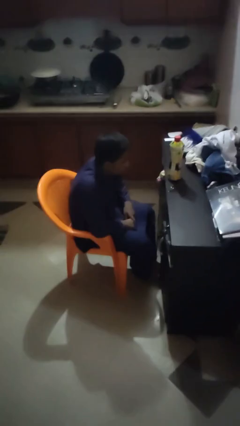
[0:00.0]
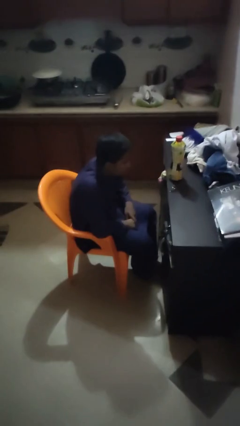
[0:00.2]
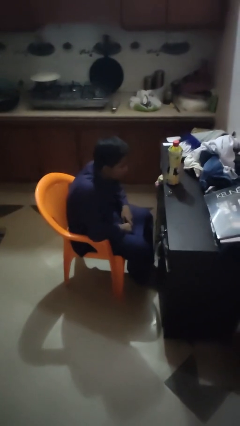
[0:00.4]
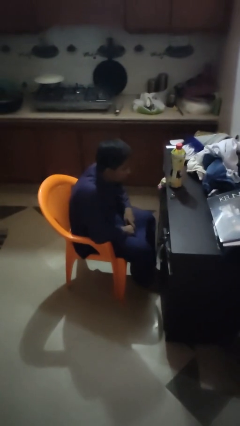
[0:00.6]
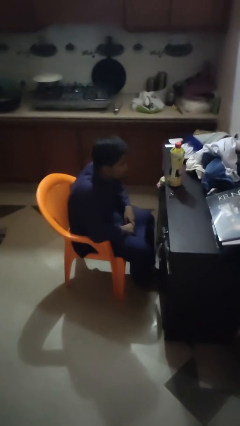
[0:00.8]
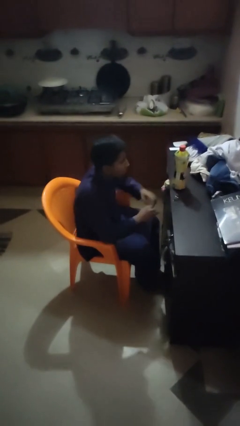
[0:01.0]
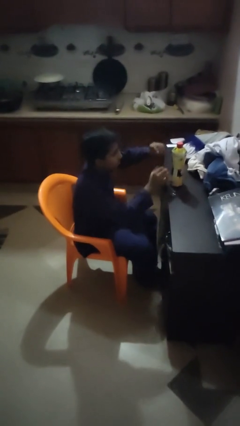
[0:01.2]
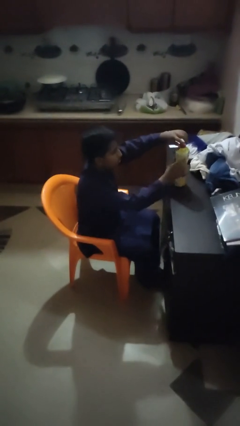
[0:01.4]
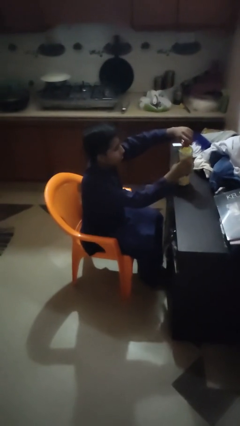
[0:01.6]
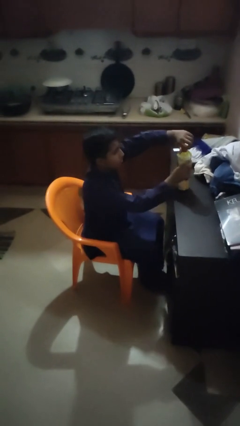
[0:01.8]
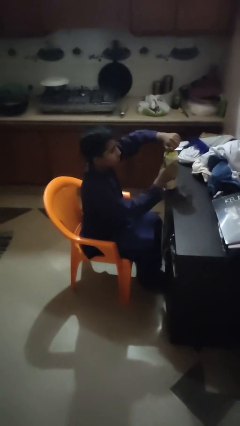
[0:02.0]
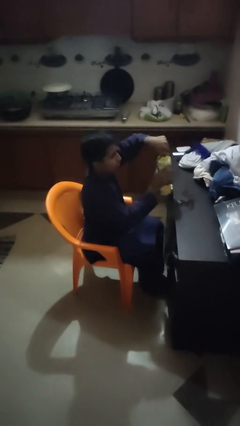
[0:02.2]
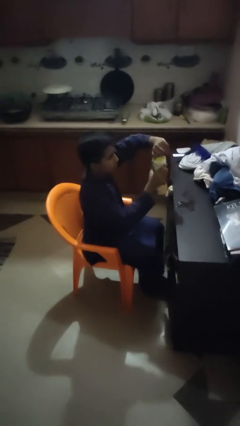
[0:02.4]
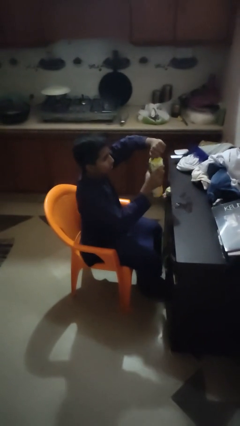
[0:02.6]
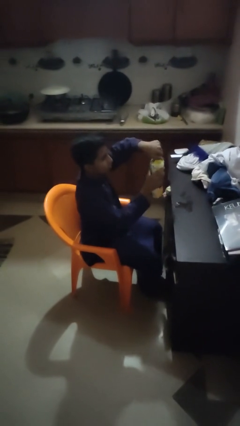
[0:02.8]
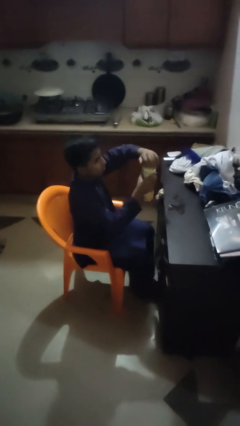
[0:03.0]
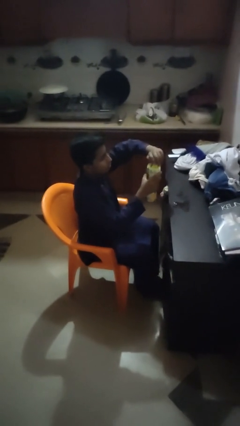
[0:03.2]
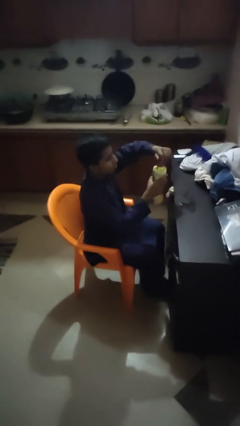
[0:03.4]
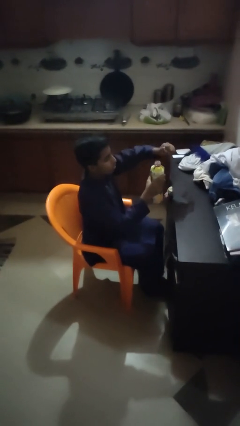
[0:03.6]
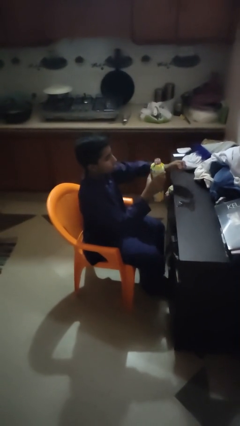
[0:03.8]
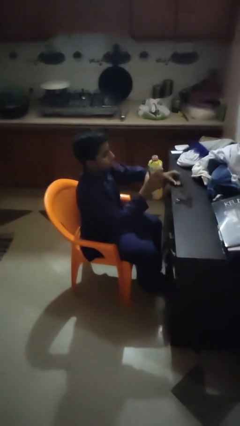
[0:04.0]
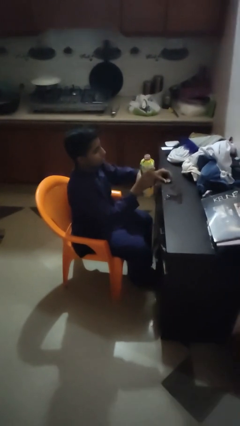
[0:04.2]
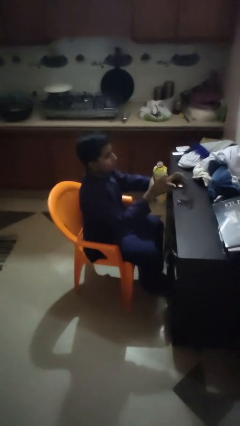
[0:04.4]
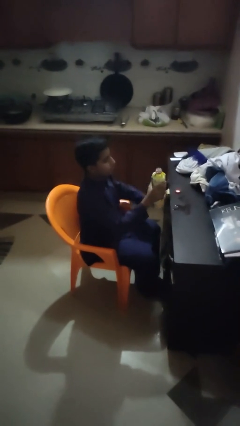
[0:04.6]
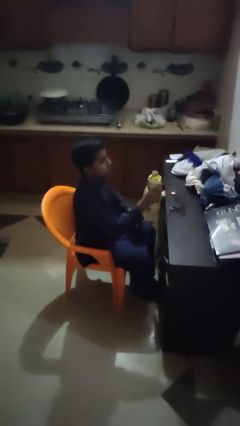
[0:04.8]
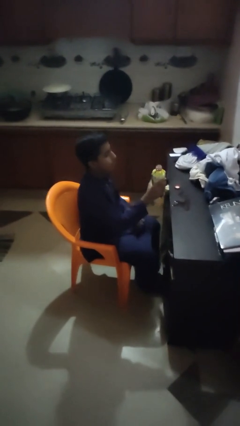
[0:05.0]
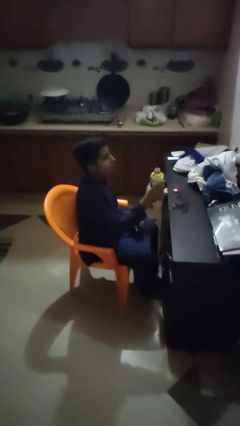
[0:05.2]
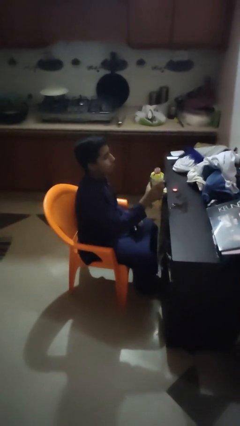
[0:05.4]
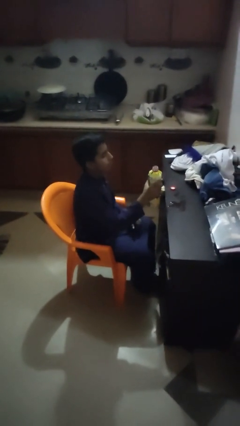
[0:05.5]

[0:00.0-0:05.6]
person unscrews lid from bottle

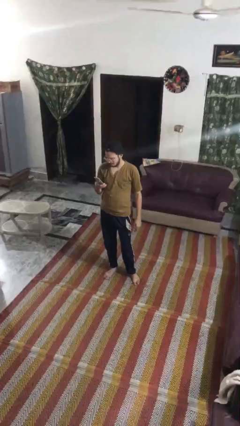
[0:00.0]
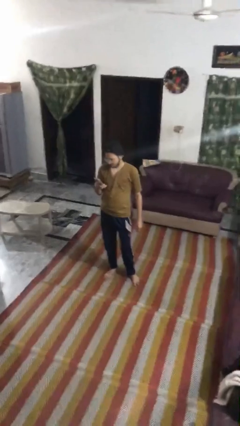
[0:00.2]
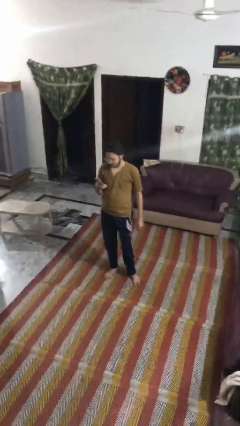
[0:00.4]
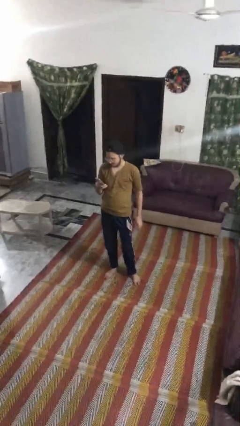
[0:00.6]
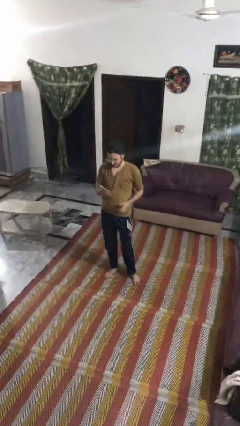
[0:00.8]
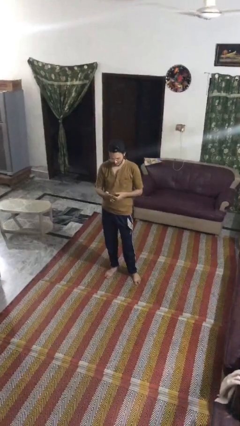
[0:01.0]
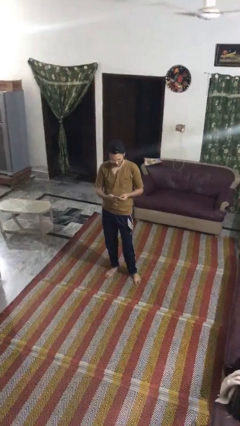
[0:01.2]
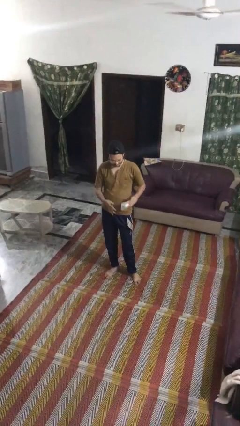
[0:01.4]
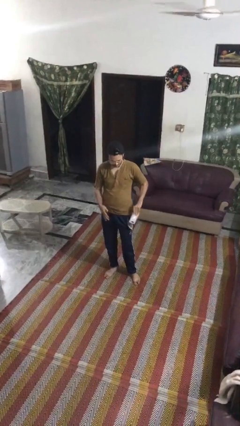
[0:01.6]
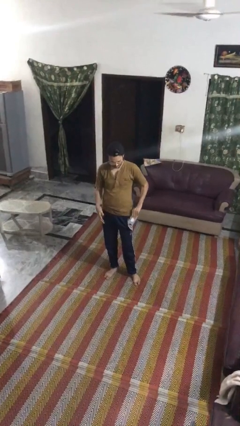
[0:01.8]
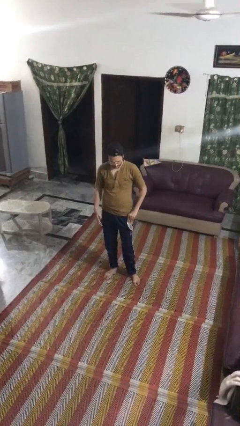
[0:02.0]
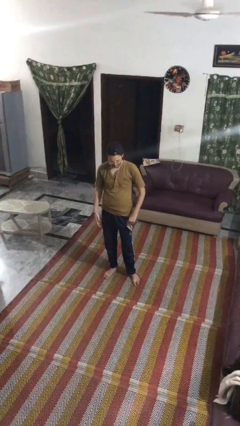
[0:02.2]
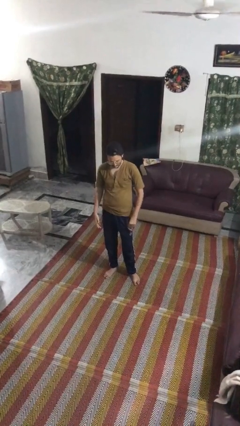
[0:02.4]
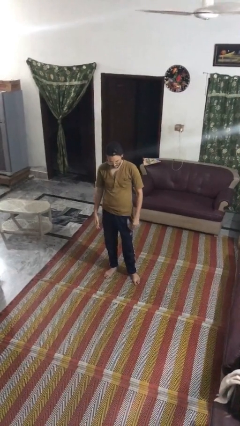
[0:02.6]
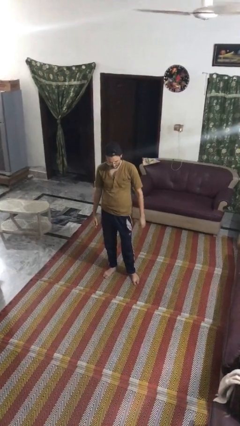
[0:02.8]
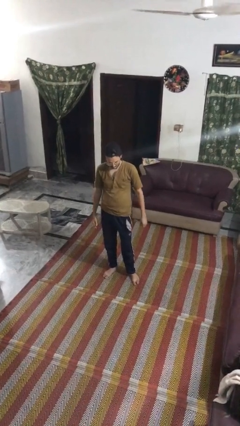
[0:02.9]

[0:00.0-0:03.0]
person puts phone into pocket

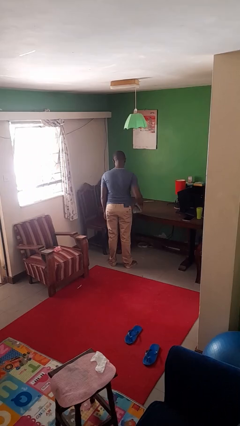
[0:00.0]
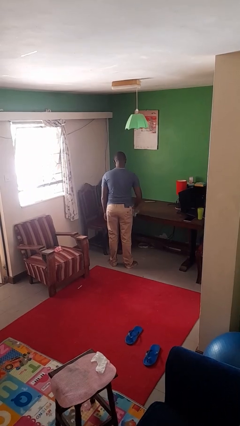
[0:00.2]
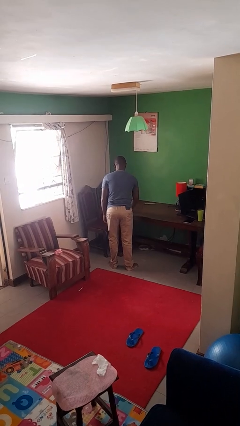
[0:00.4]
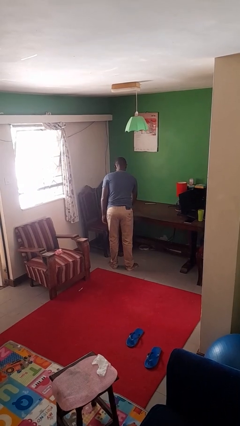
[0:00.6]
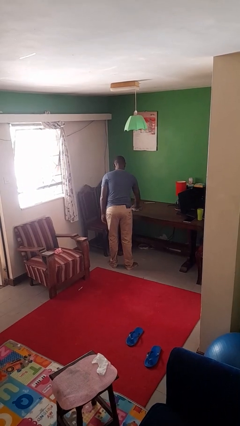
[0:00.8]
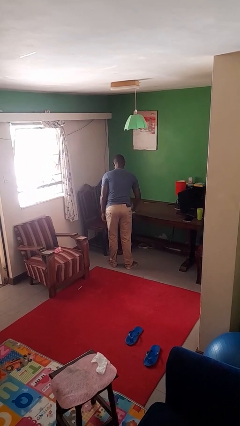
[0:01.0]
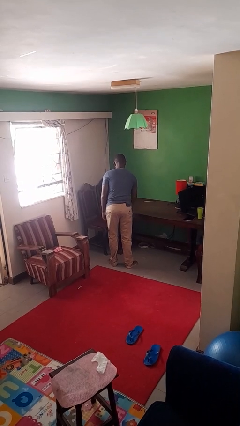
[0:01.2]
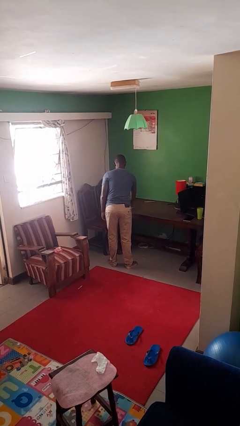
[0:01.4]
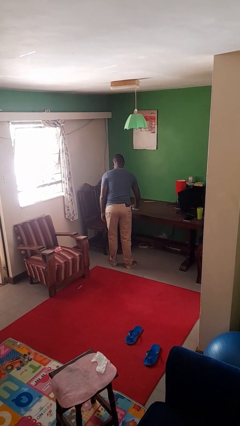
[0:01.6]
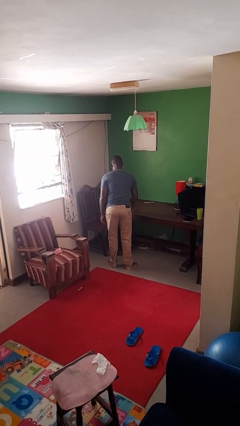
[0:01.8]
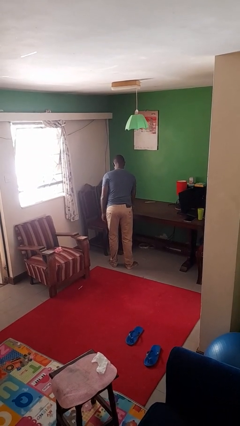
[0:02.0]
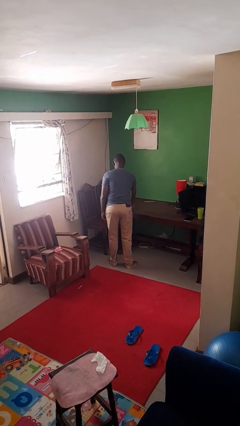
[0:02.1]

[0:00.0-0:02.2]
person cleans table with rag

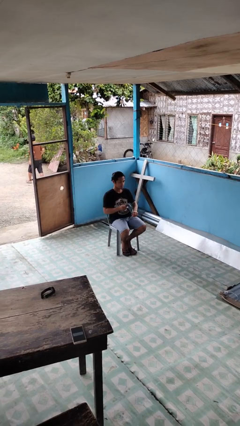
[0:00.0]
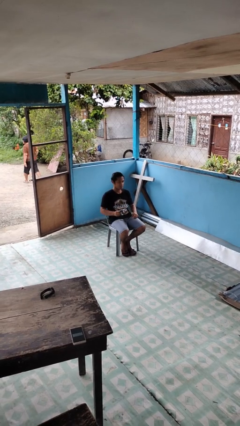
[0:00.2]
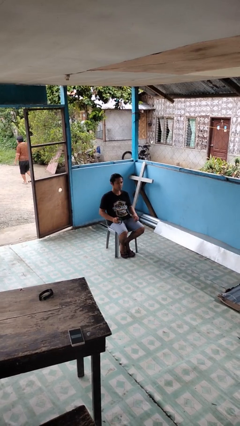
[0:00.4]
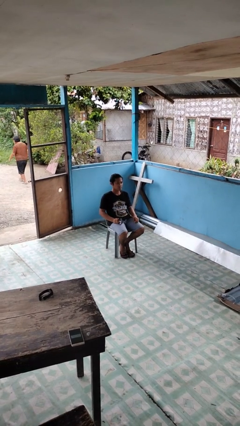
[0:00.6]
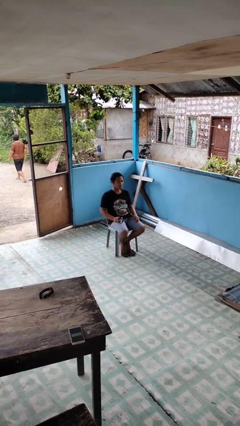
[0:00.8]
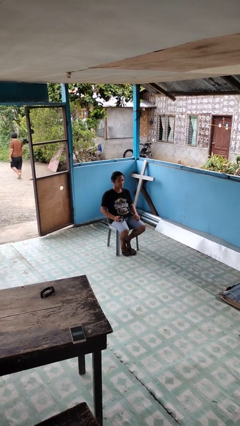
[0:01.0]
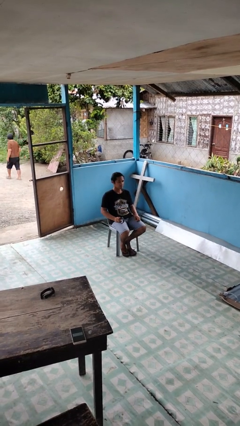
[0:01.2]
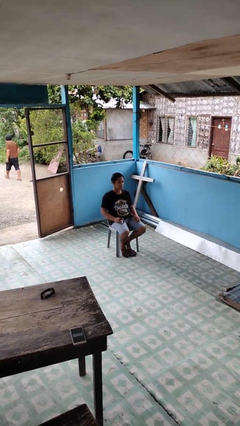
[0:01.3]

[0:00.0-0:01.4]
person takes off wristwatch

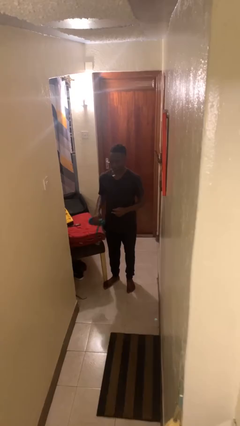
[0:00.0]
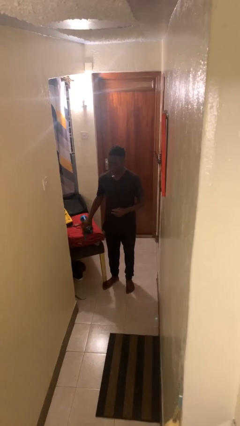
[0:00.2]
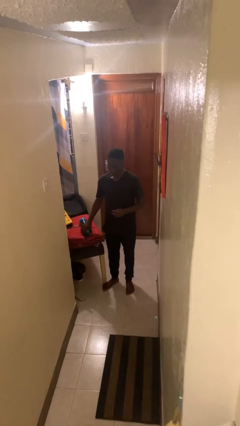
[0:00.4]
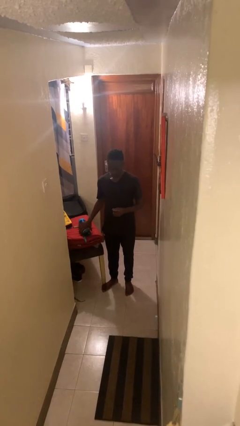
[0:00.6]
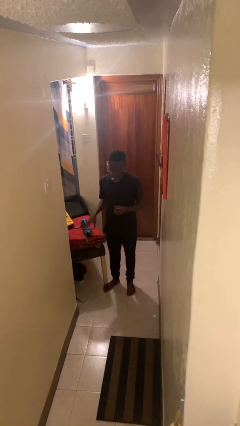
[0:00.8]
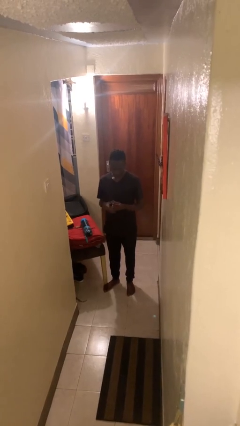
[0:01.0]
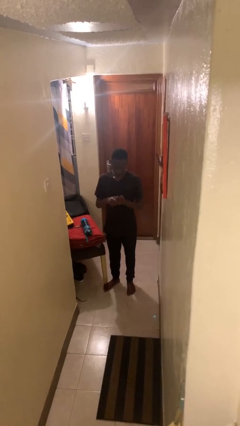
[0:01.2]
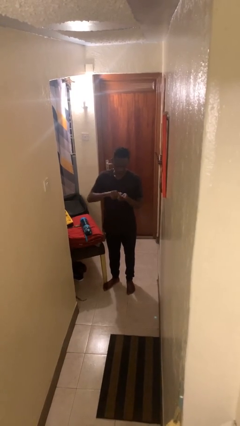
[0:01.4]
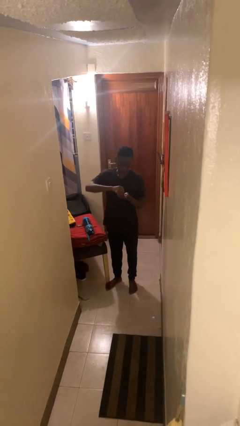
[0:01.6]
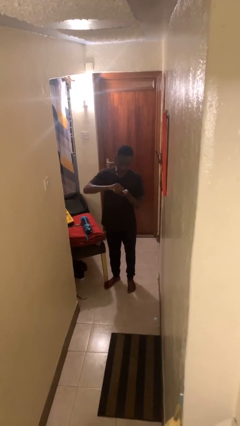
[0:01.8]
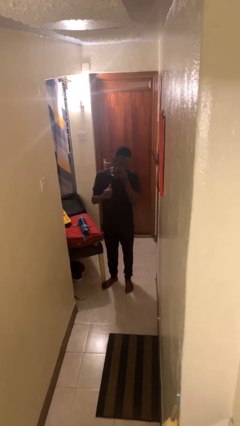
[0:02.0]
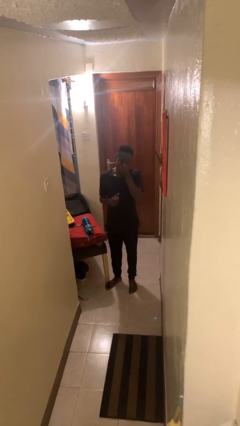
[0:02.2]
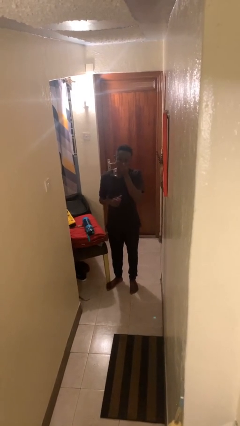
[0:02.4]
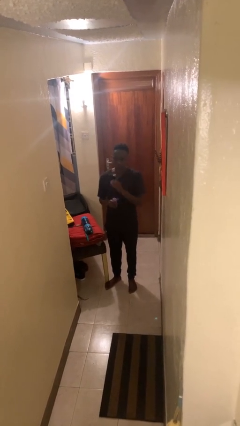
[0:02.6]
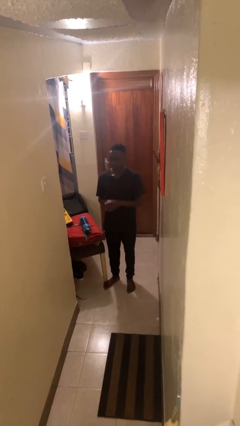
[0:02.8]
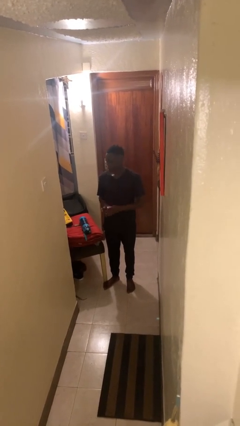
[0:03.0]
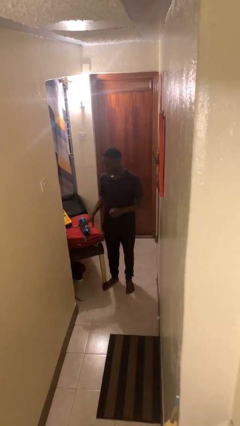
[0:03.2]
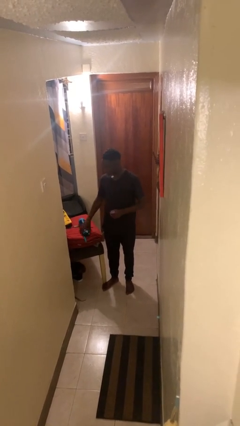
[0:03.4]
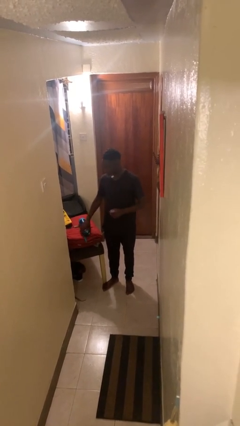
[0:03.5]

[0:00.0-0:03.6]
person takes medicine pills

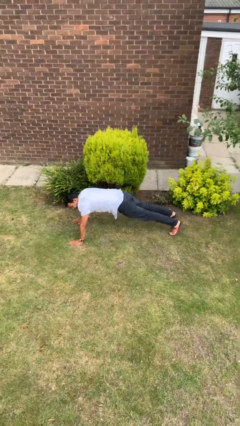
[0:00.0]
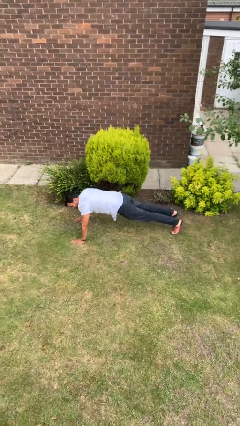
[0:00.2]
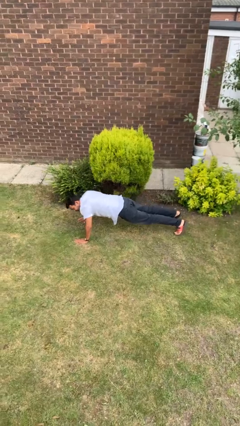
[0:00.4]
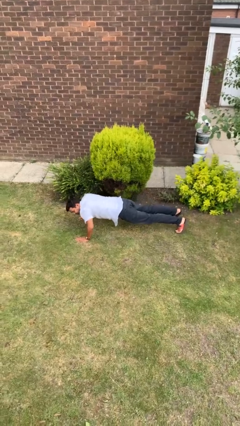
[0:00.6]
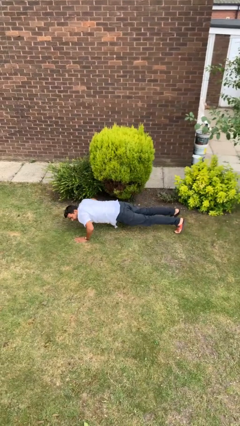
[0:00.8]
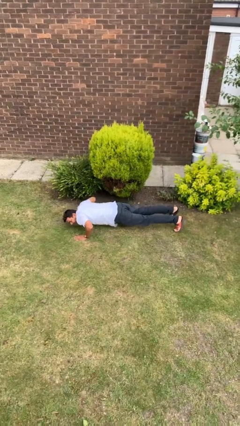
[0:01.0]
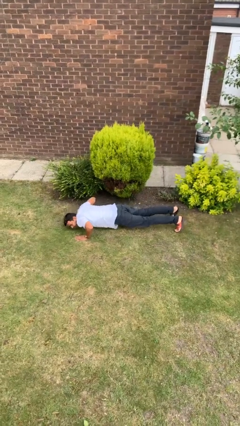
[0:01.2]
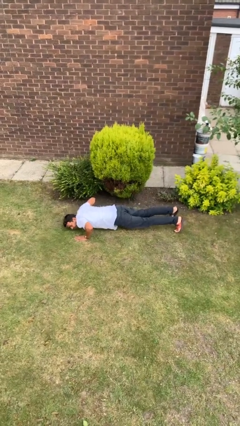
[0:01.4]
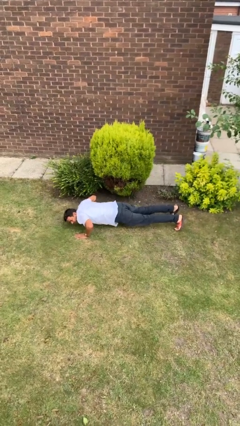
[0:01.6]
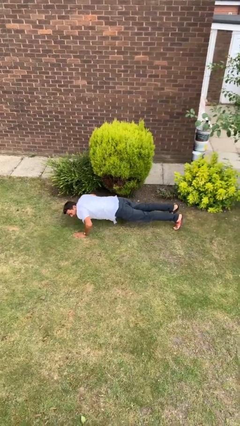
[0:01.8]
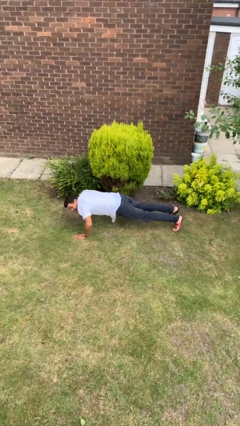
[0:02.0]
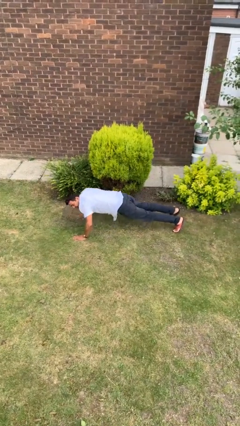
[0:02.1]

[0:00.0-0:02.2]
person exercises with pushup
